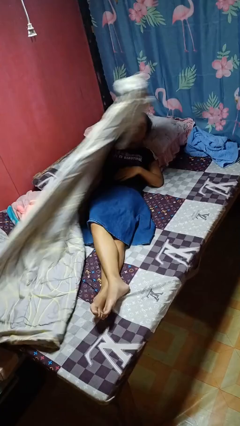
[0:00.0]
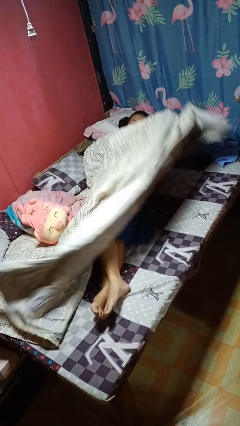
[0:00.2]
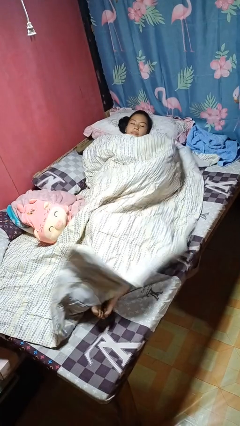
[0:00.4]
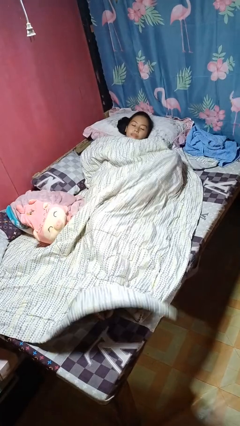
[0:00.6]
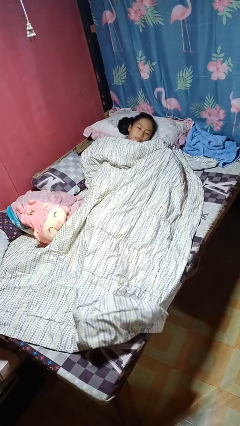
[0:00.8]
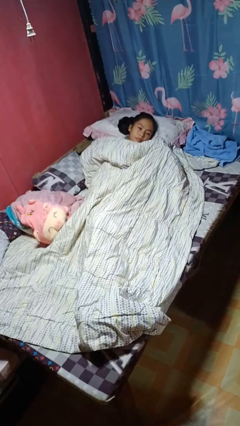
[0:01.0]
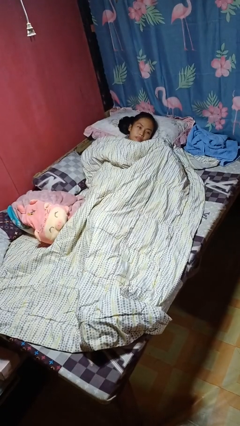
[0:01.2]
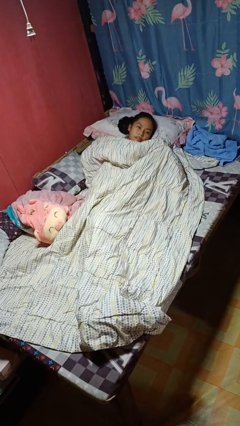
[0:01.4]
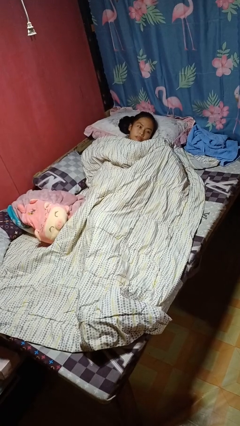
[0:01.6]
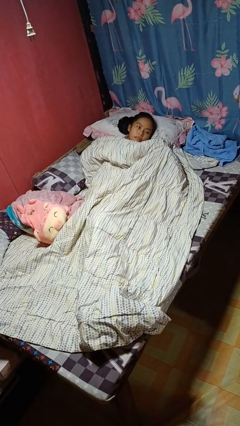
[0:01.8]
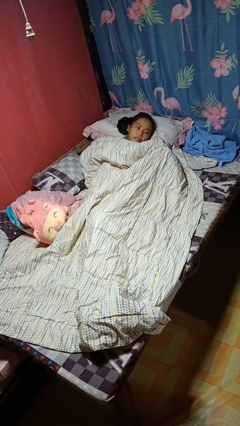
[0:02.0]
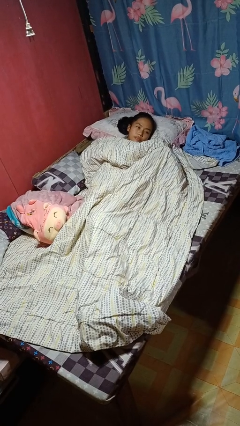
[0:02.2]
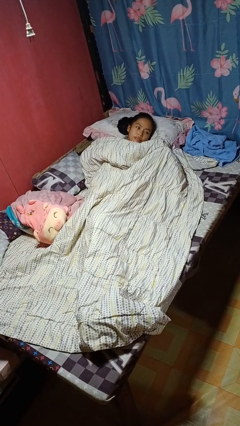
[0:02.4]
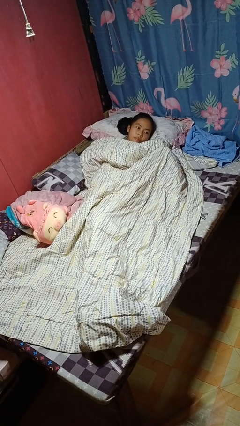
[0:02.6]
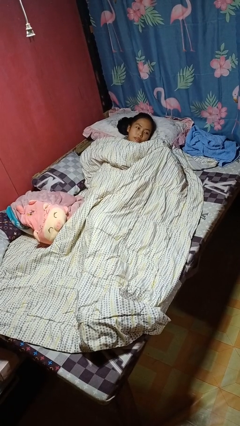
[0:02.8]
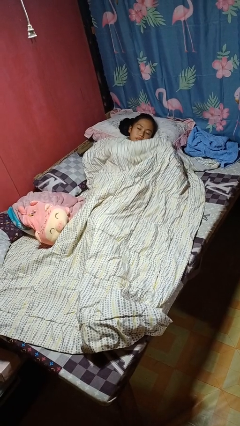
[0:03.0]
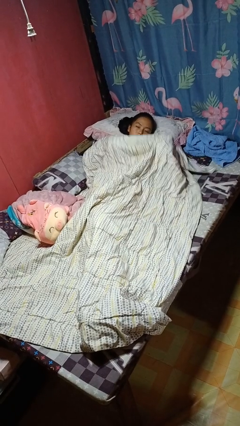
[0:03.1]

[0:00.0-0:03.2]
person covers with bedsheets

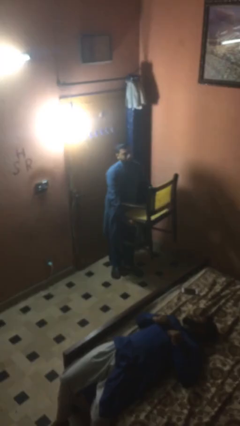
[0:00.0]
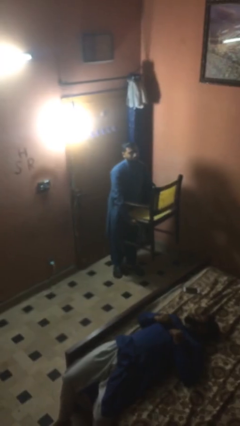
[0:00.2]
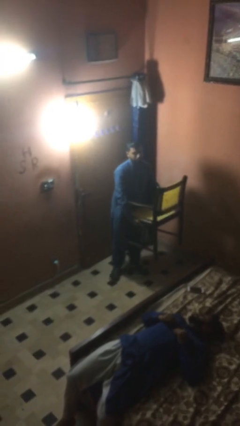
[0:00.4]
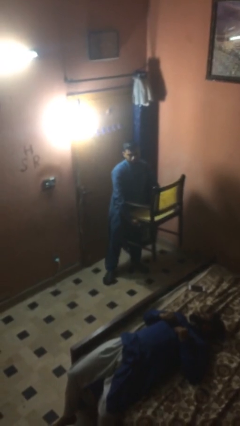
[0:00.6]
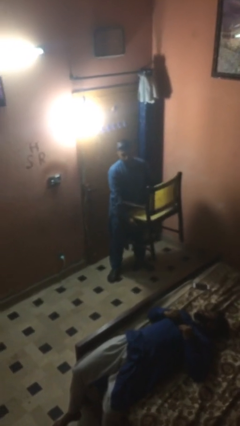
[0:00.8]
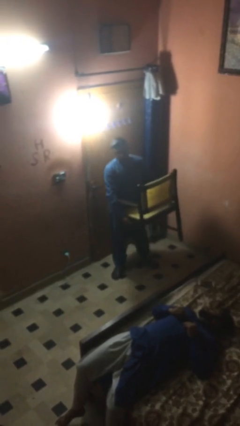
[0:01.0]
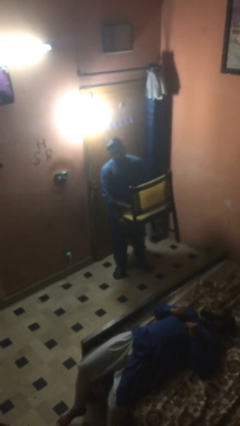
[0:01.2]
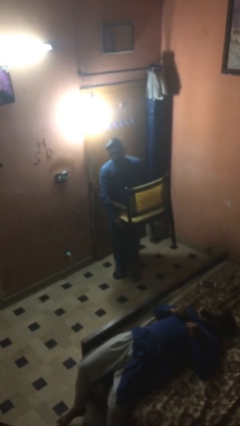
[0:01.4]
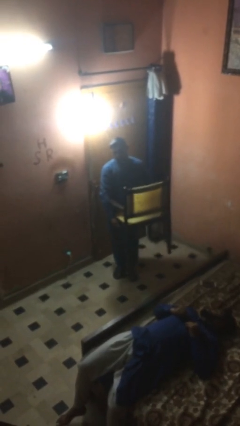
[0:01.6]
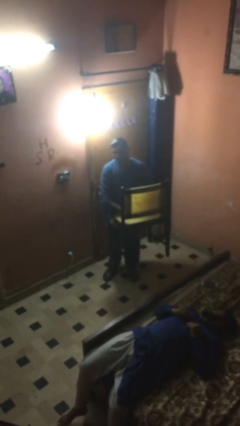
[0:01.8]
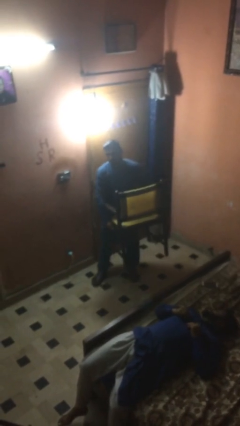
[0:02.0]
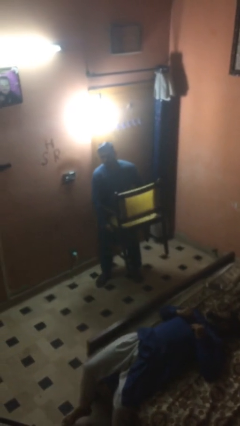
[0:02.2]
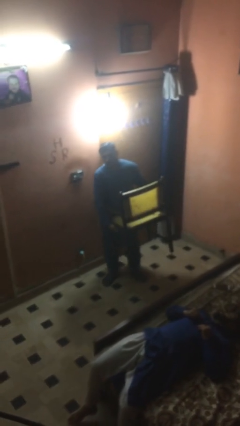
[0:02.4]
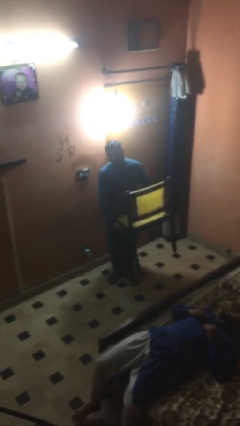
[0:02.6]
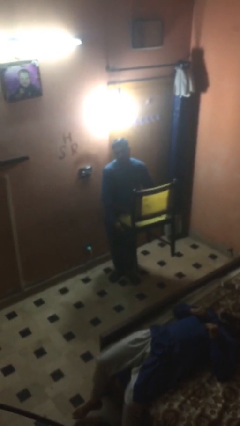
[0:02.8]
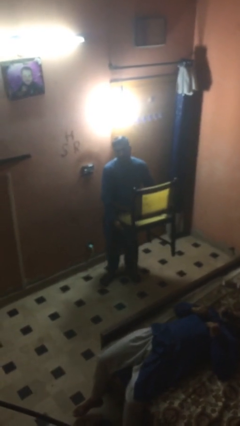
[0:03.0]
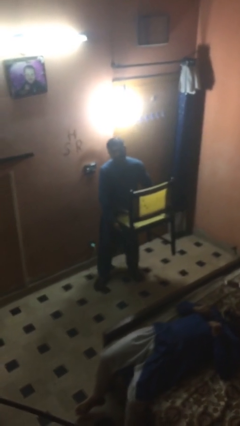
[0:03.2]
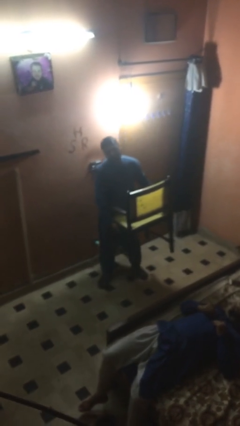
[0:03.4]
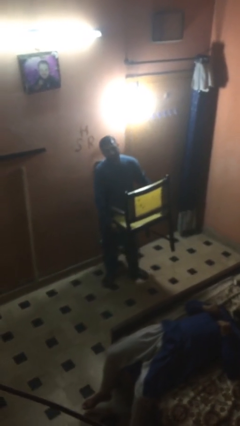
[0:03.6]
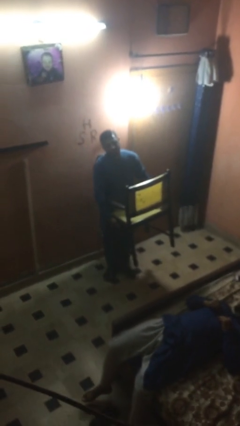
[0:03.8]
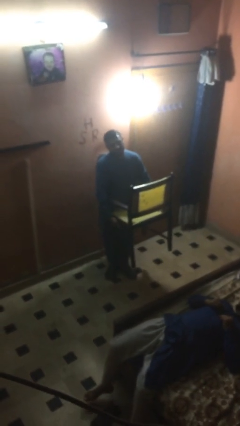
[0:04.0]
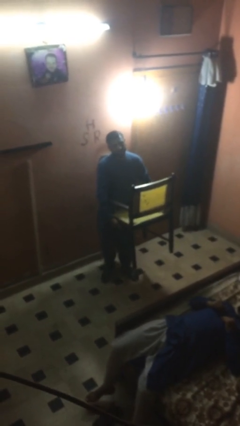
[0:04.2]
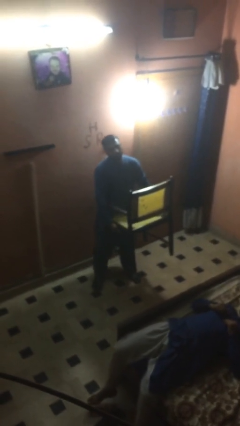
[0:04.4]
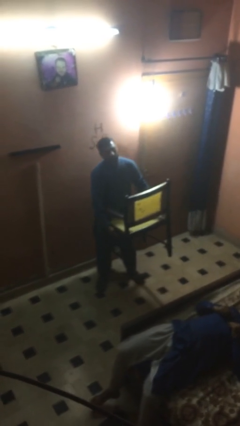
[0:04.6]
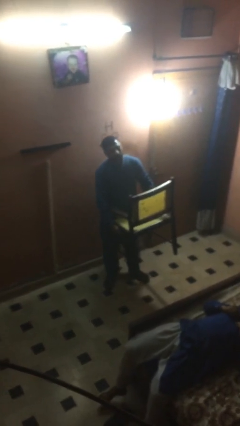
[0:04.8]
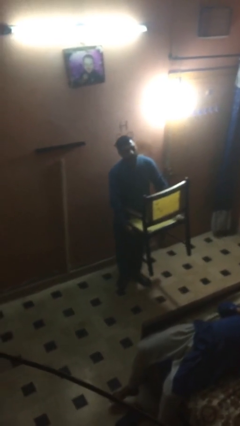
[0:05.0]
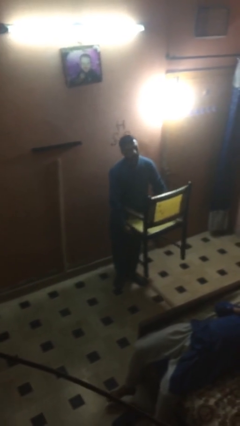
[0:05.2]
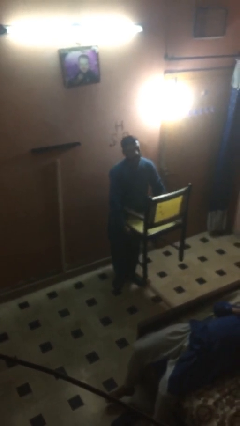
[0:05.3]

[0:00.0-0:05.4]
person carries heavy object

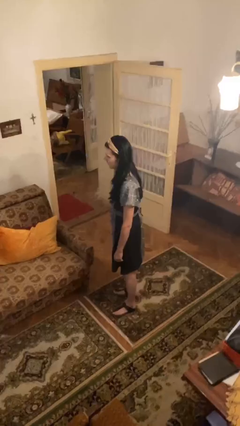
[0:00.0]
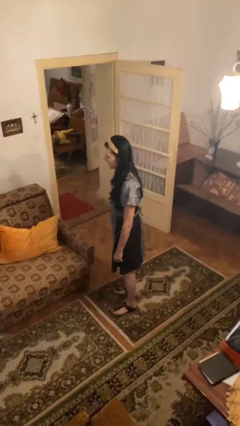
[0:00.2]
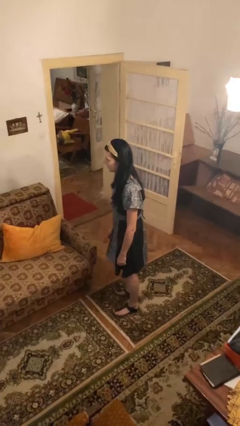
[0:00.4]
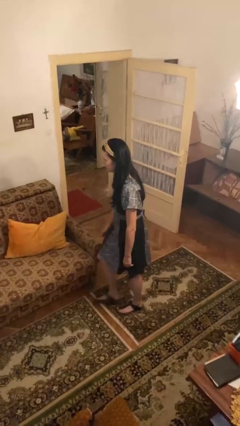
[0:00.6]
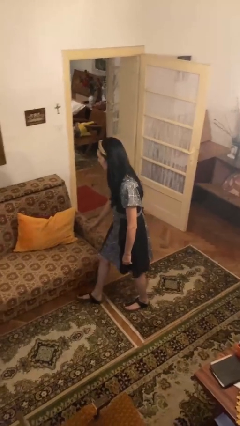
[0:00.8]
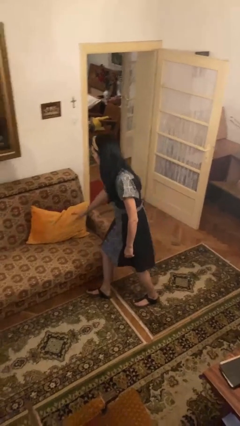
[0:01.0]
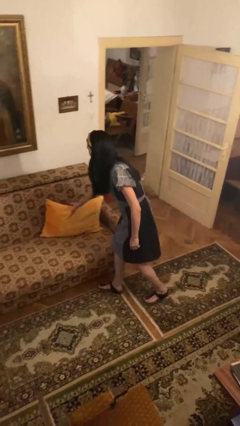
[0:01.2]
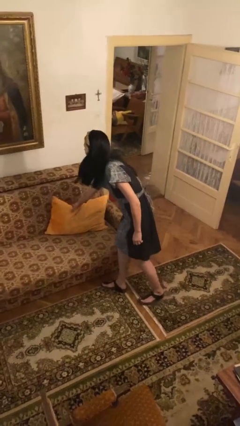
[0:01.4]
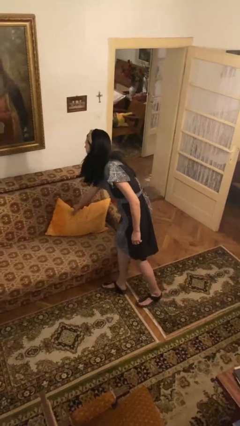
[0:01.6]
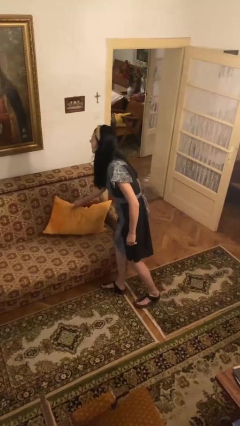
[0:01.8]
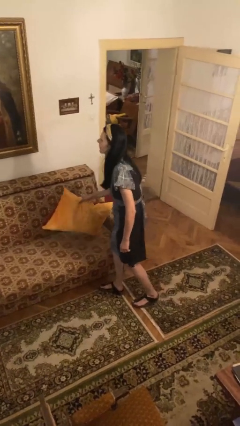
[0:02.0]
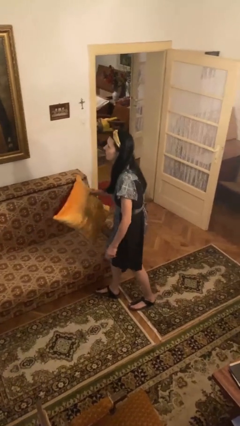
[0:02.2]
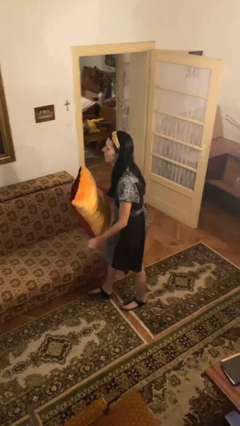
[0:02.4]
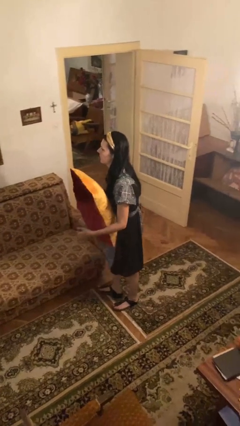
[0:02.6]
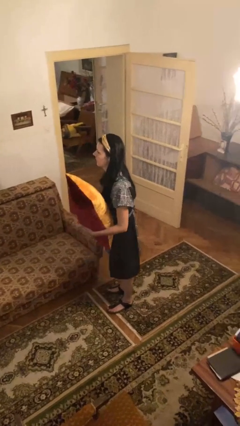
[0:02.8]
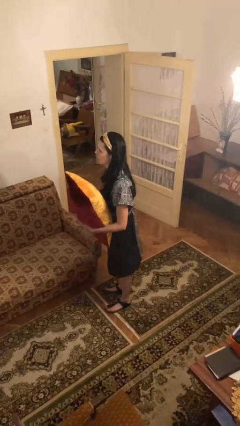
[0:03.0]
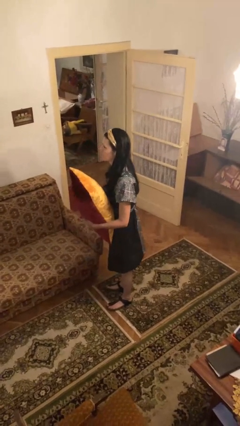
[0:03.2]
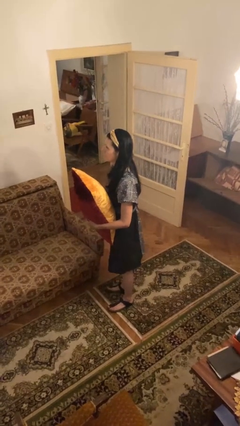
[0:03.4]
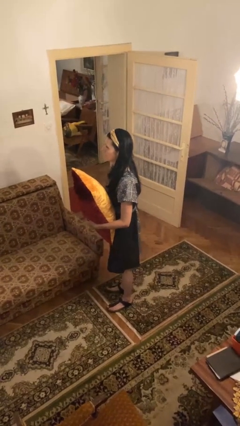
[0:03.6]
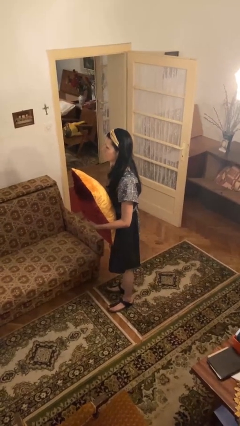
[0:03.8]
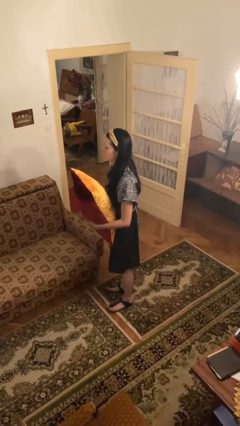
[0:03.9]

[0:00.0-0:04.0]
person picks up object from couch

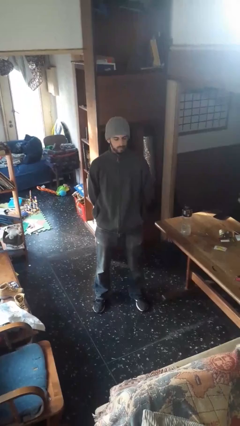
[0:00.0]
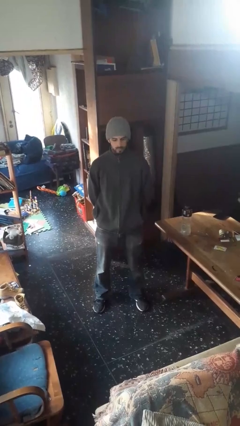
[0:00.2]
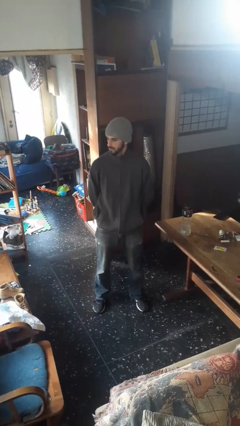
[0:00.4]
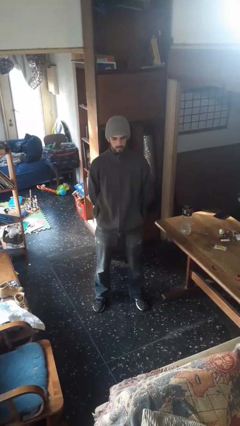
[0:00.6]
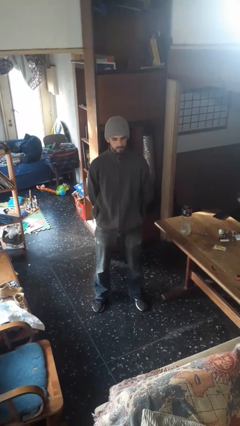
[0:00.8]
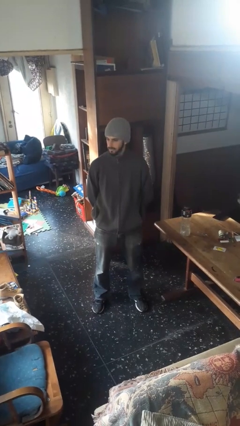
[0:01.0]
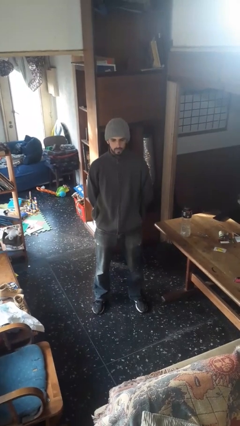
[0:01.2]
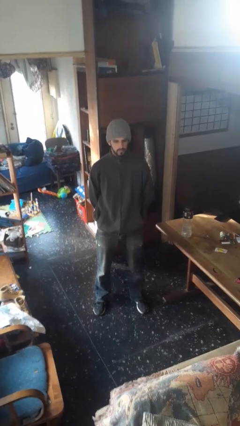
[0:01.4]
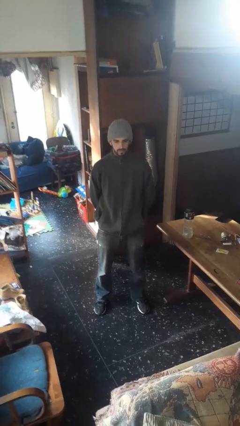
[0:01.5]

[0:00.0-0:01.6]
person shakes head

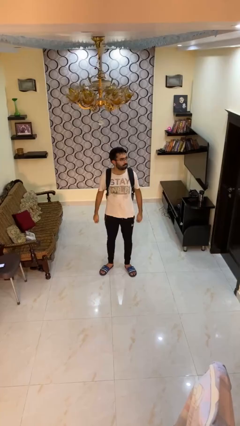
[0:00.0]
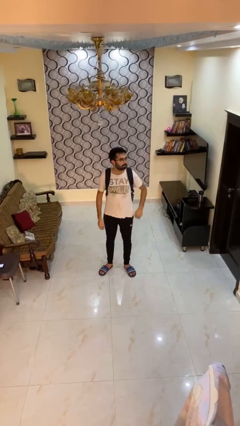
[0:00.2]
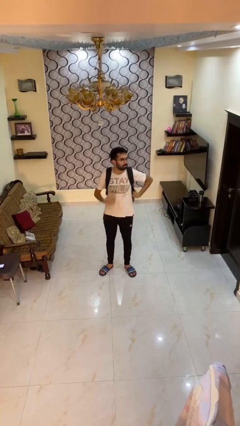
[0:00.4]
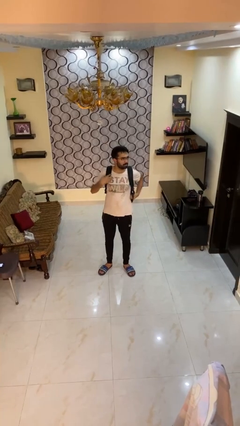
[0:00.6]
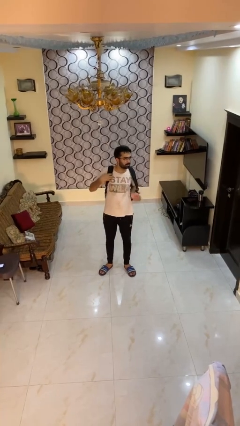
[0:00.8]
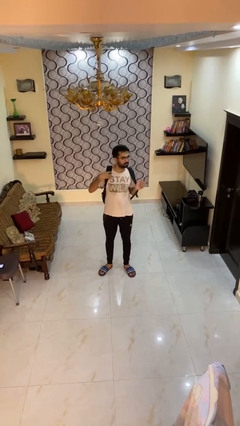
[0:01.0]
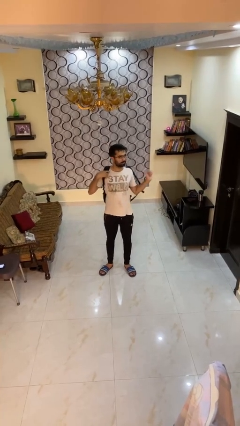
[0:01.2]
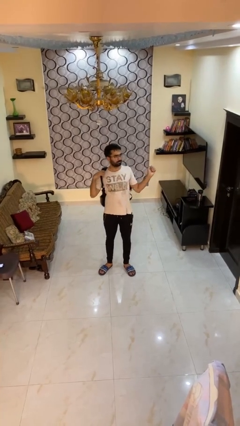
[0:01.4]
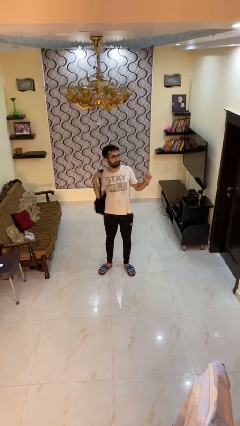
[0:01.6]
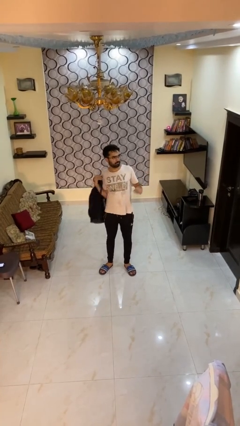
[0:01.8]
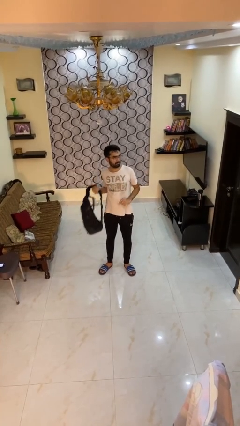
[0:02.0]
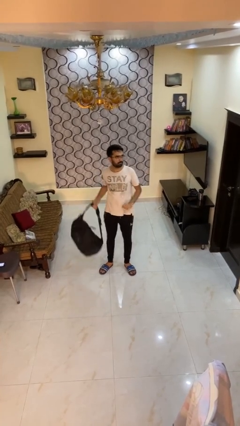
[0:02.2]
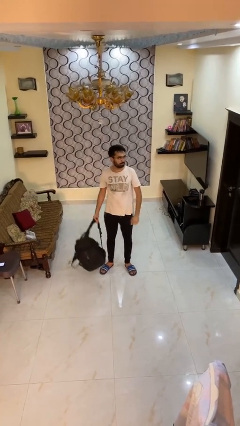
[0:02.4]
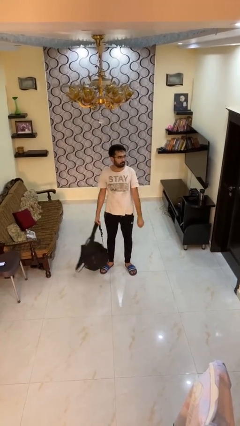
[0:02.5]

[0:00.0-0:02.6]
person takes off backpack

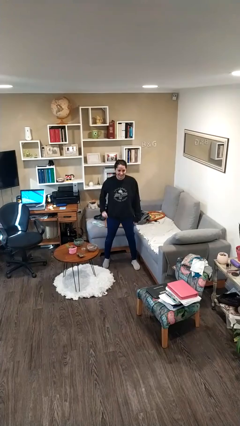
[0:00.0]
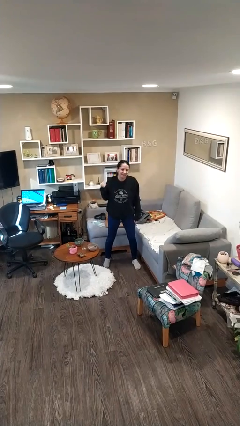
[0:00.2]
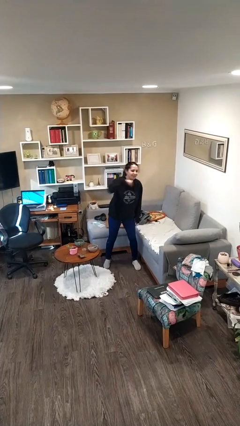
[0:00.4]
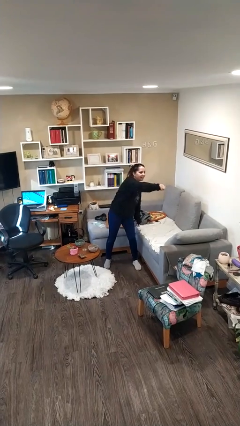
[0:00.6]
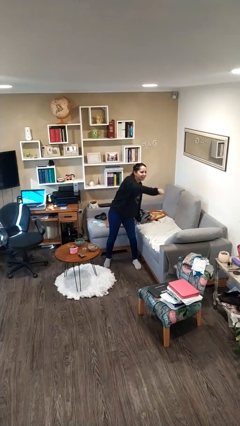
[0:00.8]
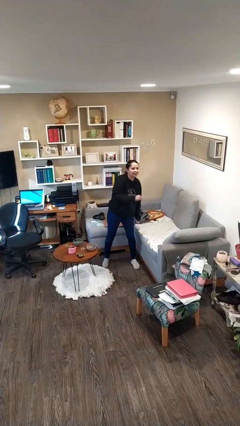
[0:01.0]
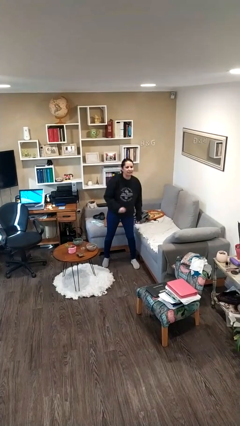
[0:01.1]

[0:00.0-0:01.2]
person punches
